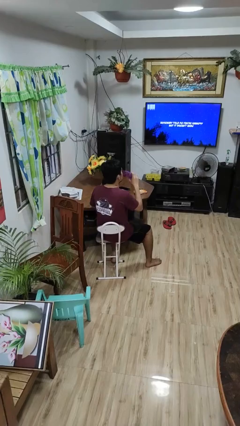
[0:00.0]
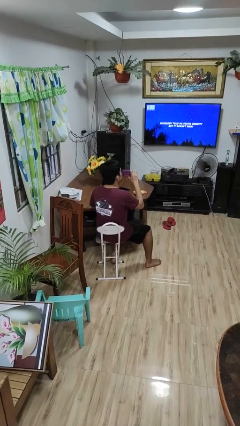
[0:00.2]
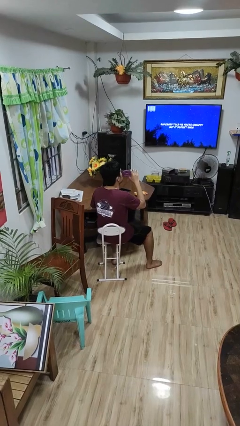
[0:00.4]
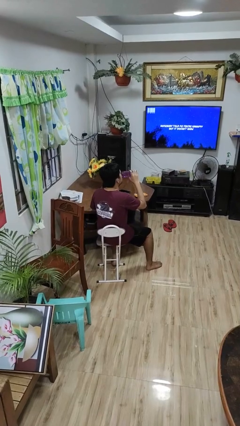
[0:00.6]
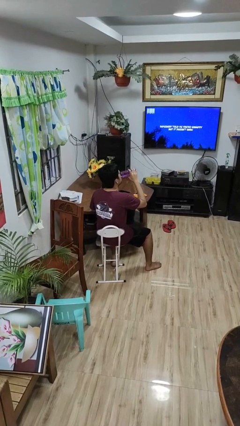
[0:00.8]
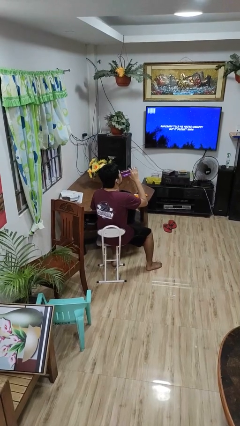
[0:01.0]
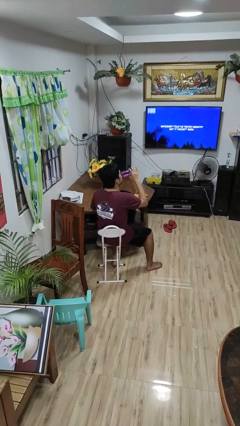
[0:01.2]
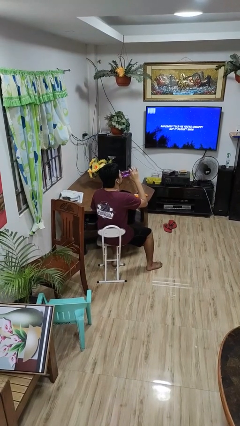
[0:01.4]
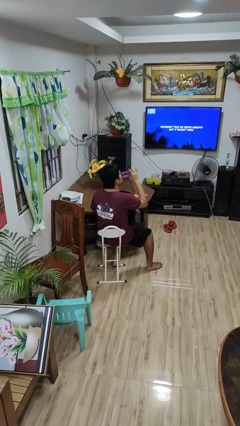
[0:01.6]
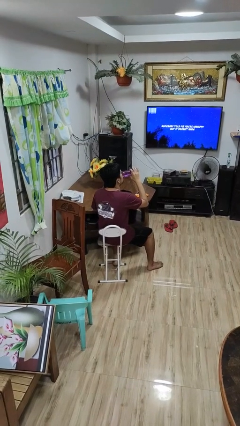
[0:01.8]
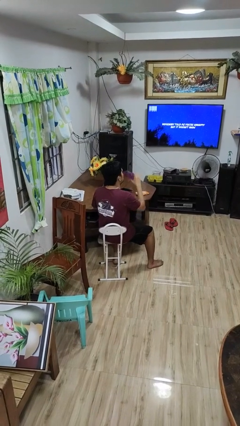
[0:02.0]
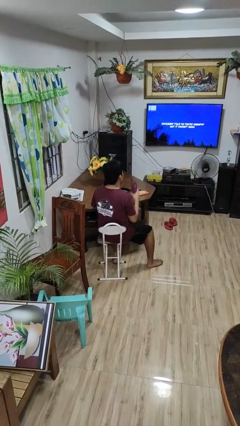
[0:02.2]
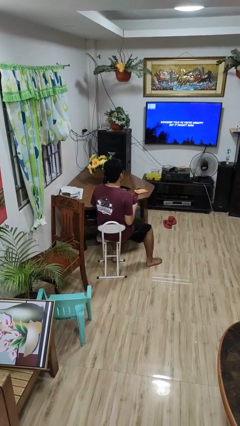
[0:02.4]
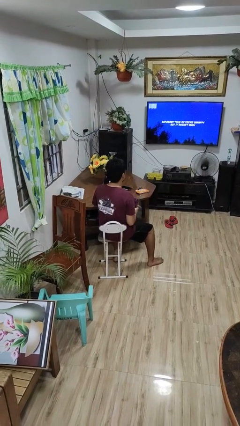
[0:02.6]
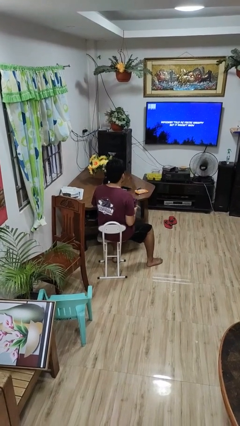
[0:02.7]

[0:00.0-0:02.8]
person drinks from bottle

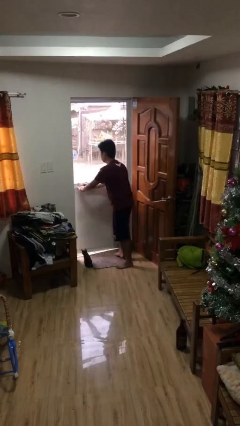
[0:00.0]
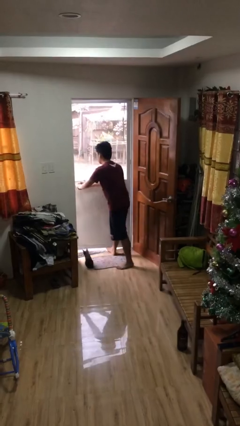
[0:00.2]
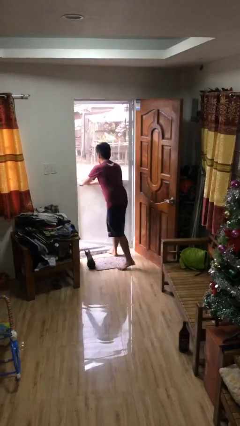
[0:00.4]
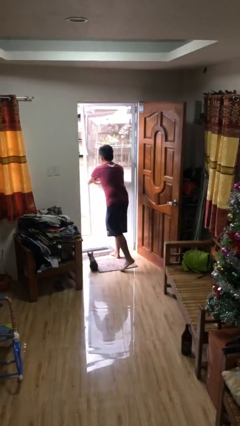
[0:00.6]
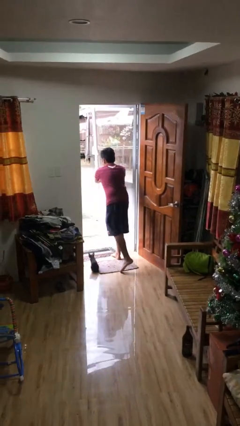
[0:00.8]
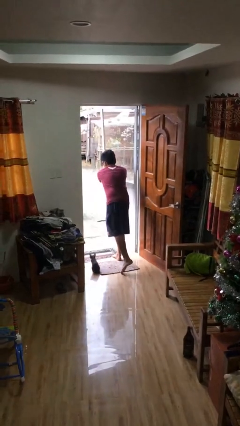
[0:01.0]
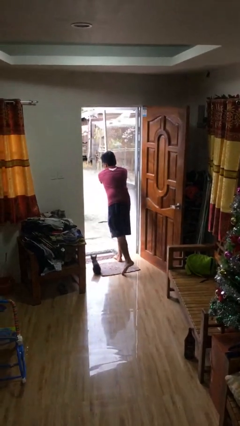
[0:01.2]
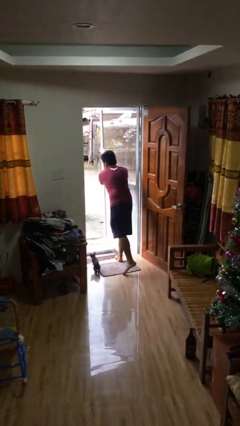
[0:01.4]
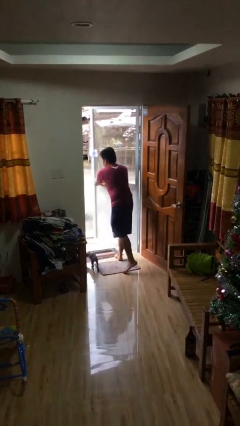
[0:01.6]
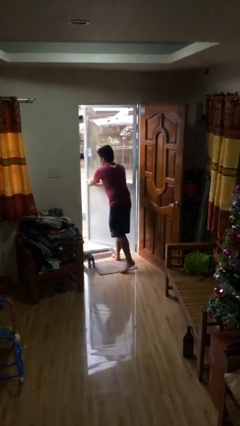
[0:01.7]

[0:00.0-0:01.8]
person opens facility door

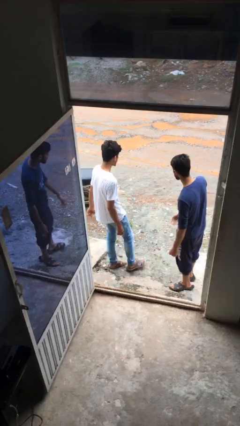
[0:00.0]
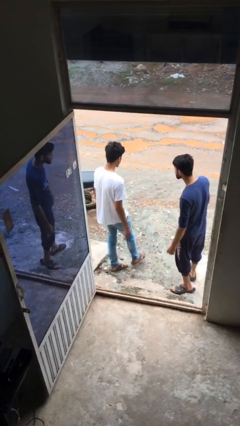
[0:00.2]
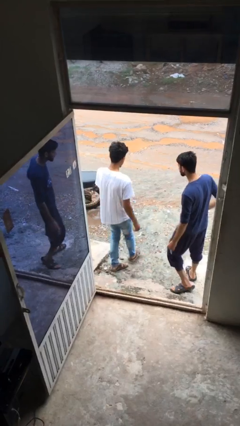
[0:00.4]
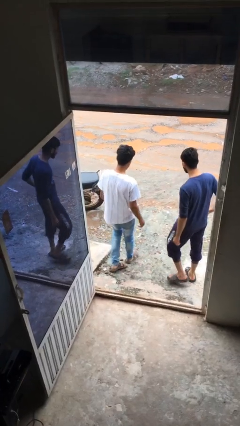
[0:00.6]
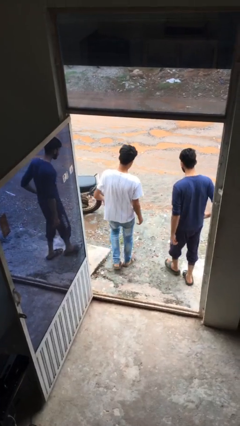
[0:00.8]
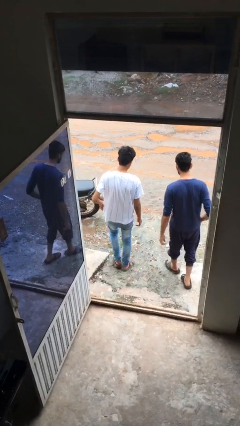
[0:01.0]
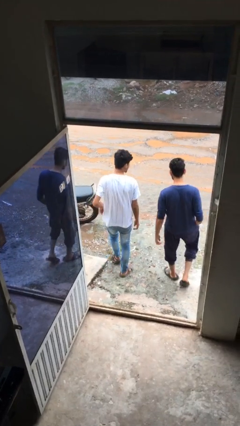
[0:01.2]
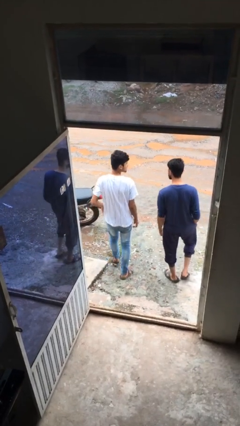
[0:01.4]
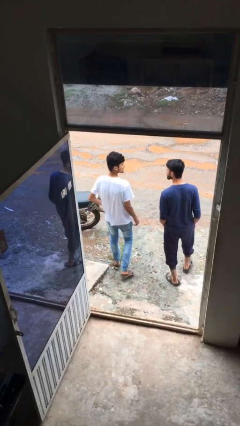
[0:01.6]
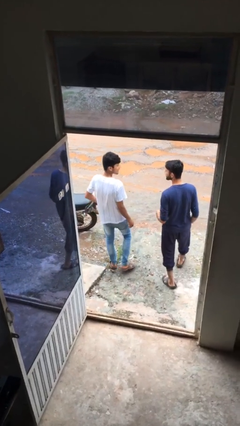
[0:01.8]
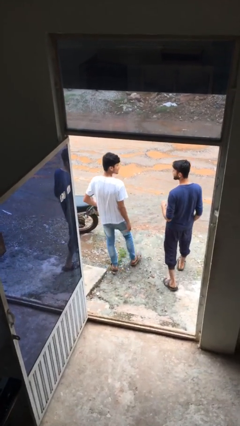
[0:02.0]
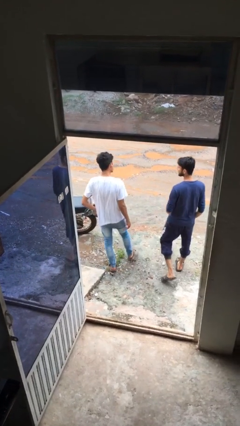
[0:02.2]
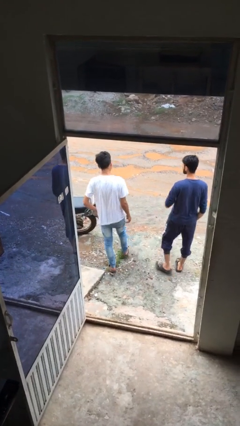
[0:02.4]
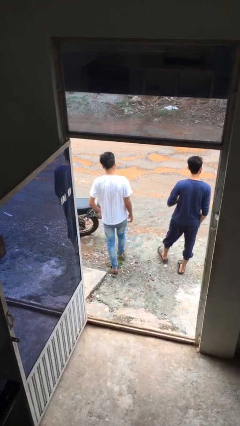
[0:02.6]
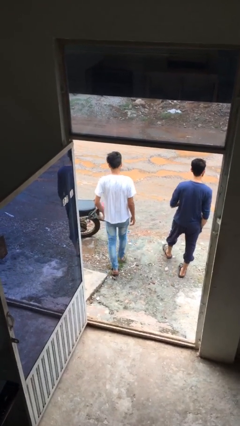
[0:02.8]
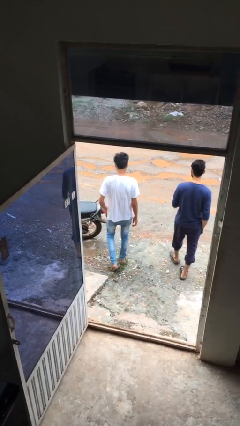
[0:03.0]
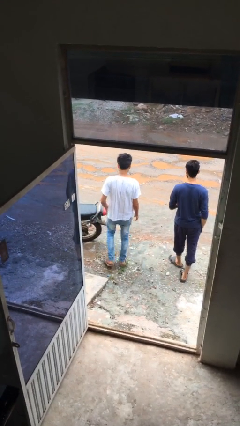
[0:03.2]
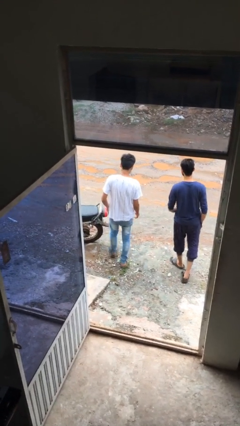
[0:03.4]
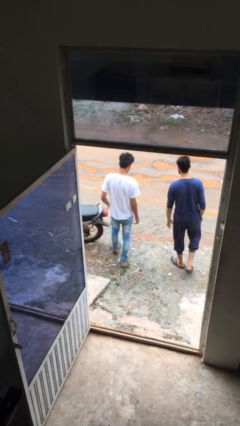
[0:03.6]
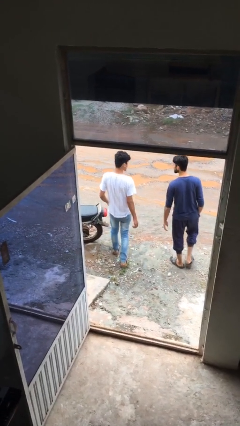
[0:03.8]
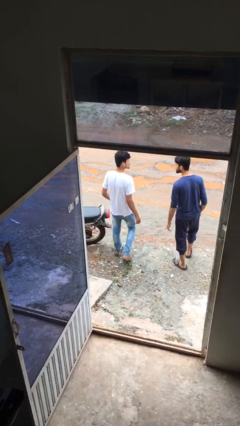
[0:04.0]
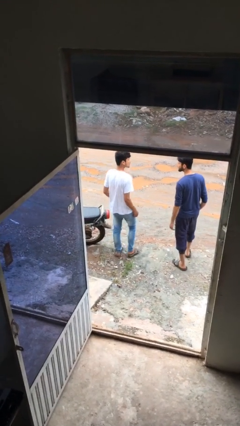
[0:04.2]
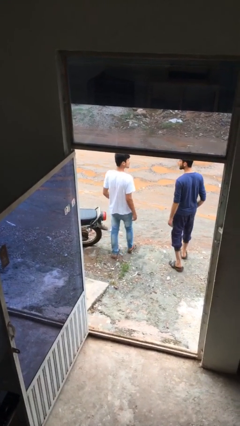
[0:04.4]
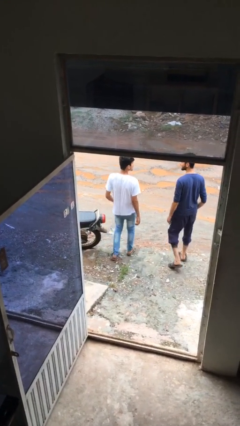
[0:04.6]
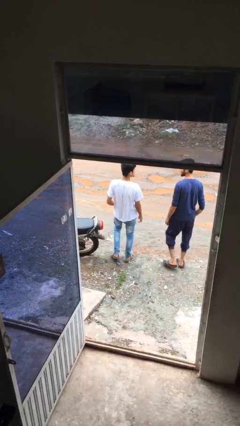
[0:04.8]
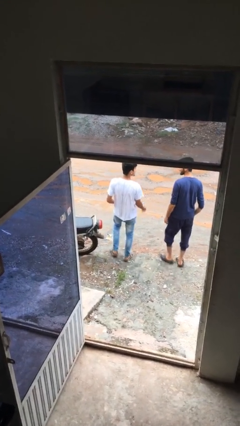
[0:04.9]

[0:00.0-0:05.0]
person talks to person

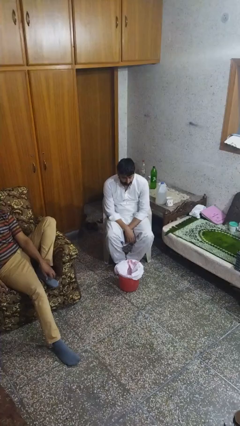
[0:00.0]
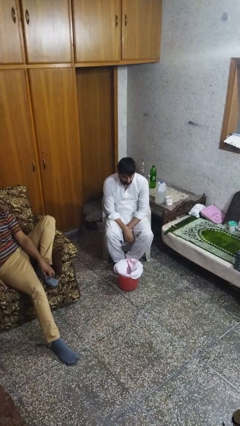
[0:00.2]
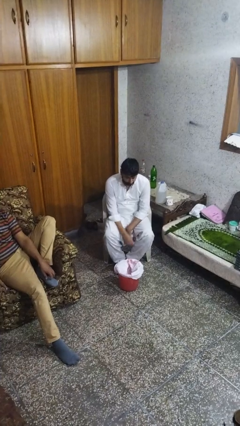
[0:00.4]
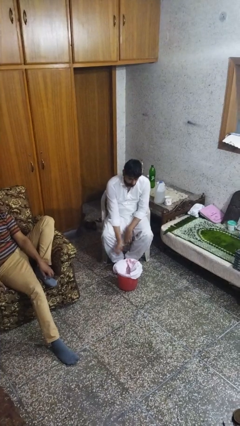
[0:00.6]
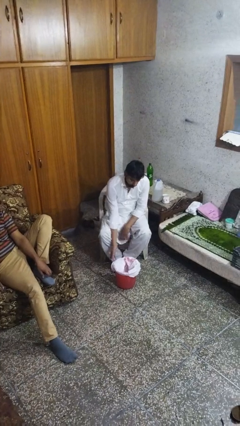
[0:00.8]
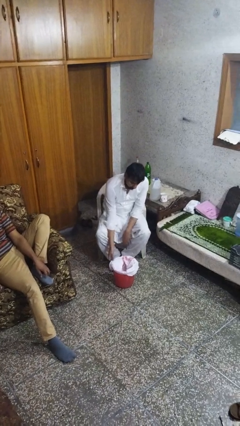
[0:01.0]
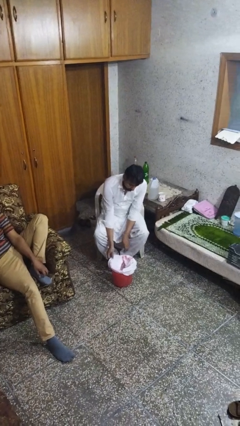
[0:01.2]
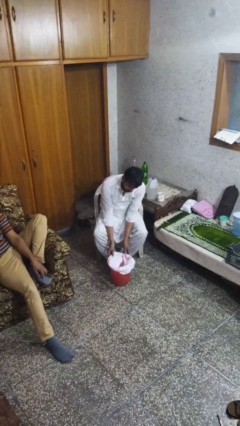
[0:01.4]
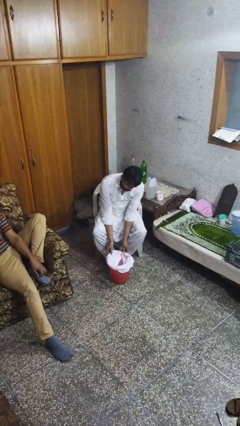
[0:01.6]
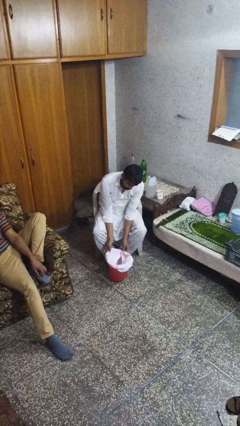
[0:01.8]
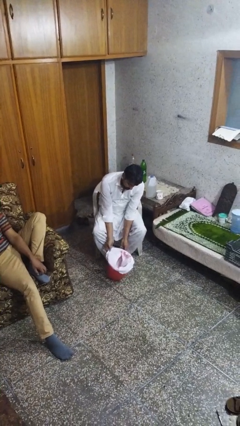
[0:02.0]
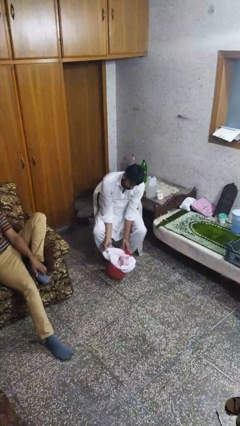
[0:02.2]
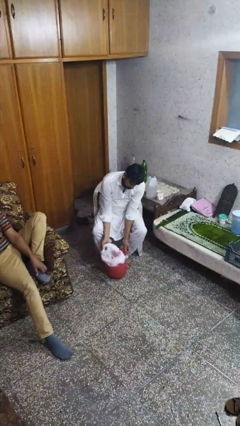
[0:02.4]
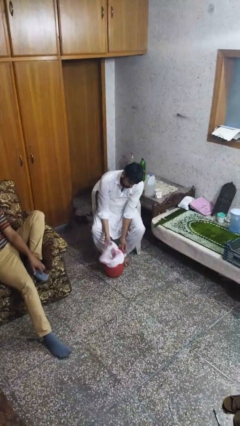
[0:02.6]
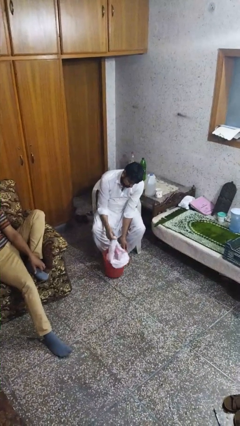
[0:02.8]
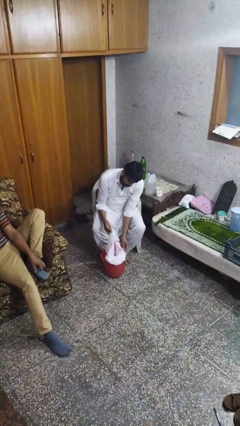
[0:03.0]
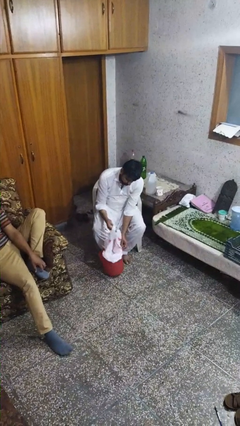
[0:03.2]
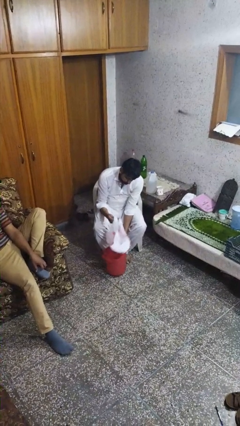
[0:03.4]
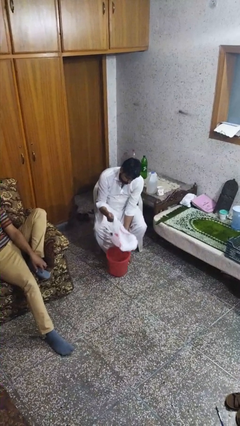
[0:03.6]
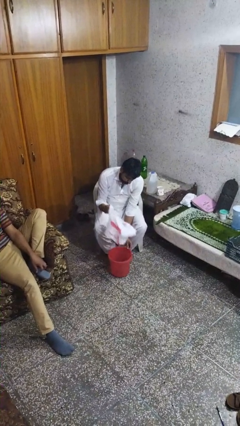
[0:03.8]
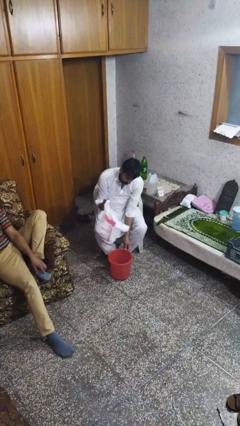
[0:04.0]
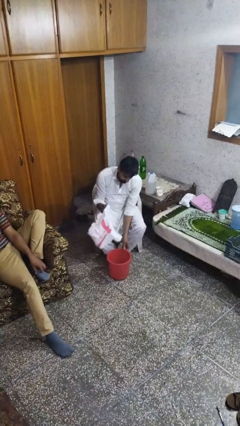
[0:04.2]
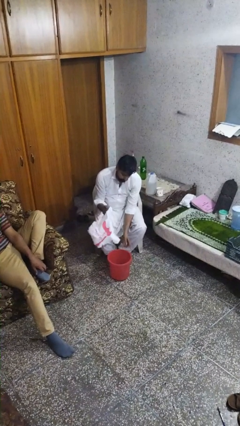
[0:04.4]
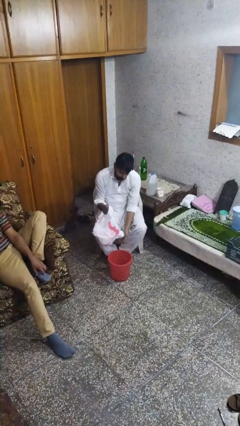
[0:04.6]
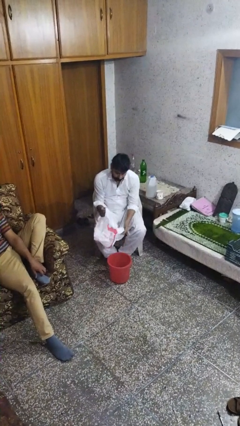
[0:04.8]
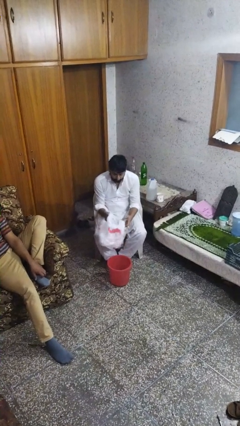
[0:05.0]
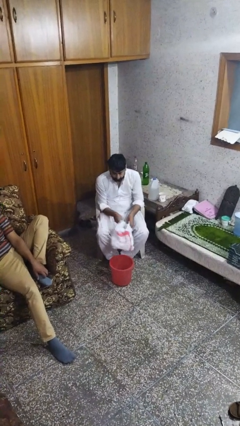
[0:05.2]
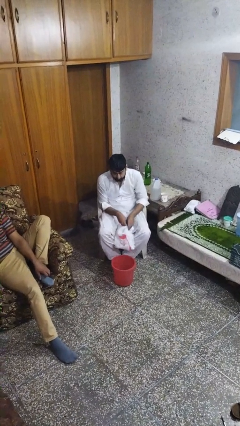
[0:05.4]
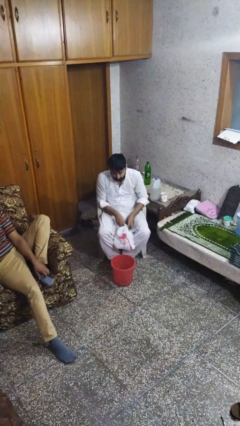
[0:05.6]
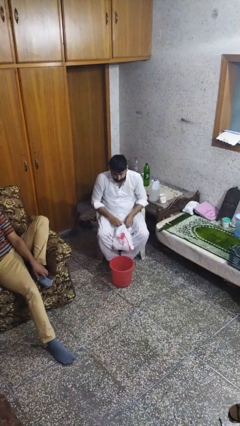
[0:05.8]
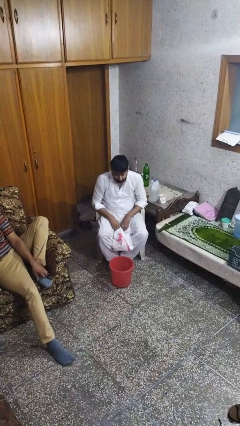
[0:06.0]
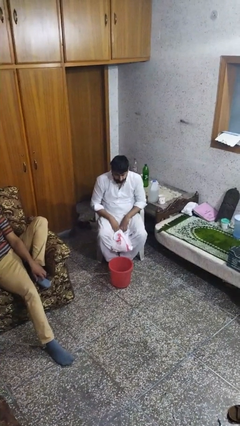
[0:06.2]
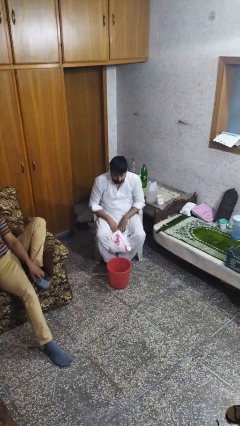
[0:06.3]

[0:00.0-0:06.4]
person removes trashbag from trashcan

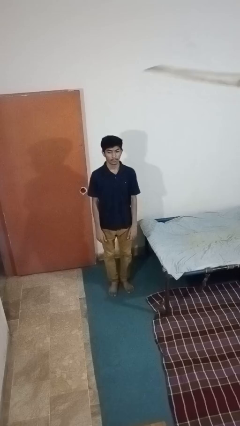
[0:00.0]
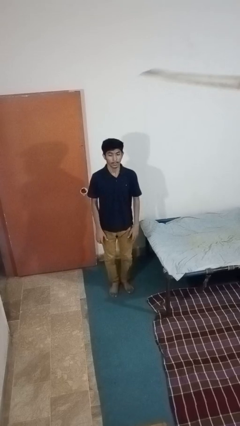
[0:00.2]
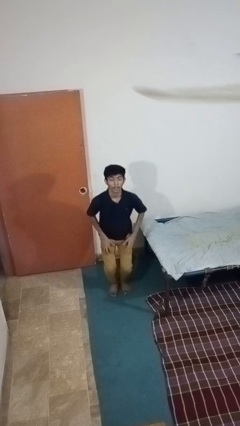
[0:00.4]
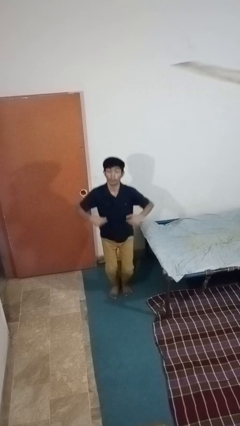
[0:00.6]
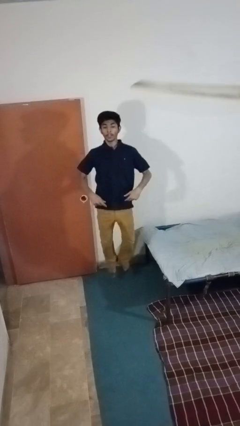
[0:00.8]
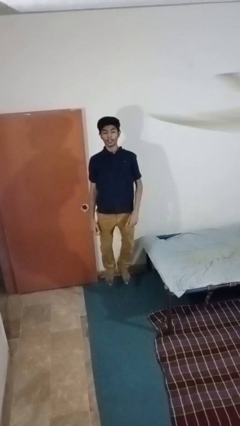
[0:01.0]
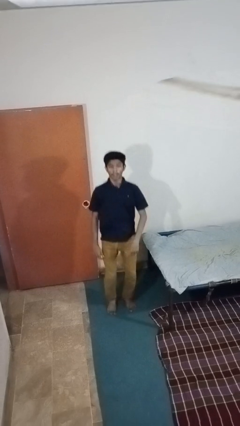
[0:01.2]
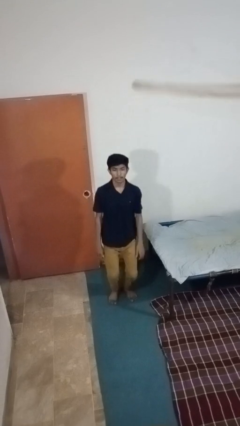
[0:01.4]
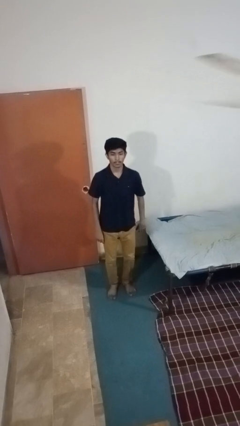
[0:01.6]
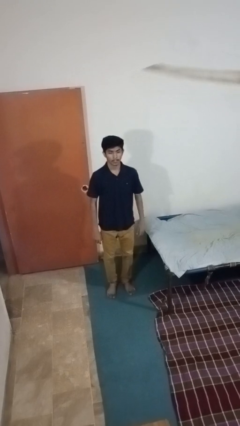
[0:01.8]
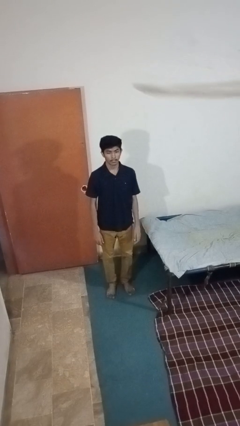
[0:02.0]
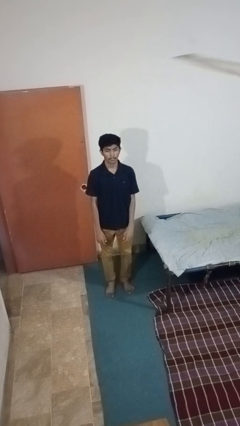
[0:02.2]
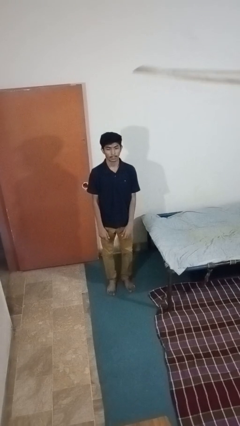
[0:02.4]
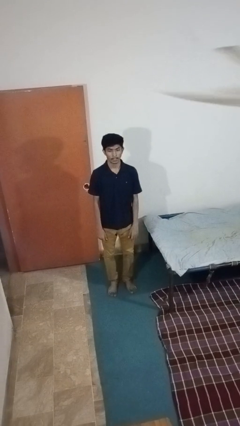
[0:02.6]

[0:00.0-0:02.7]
person jumps
